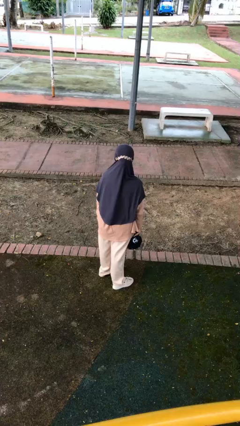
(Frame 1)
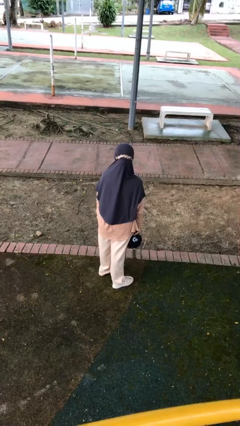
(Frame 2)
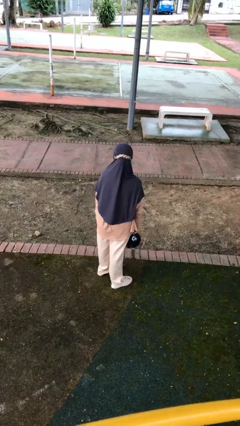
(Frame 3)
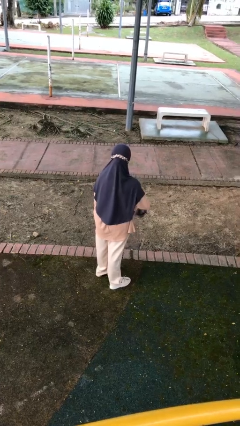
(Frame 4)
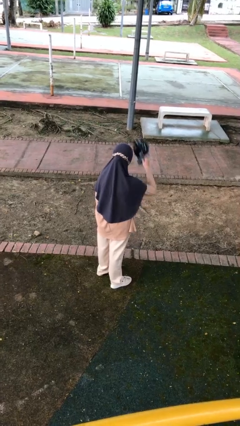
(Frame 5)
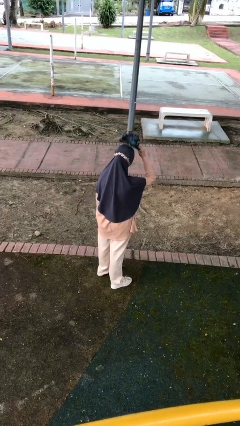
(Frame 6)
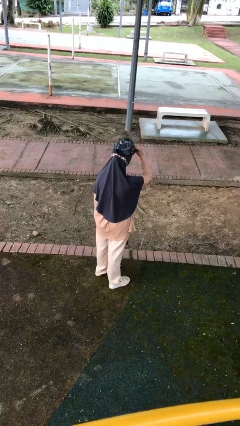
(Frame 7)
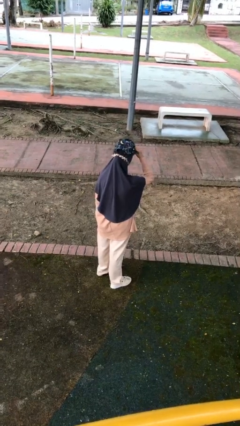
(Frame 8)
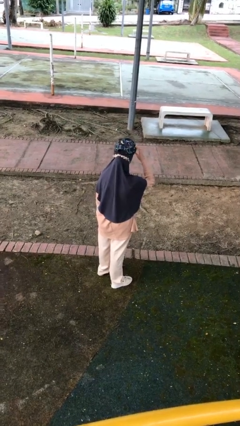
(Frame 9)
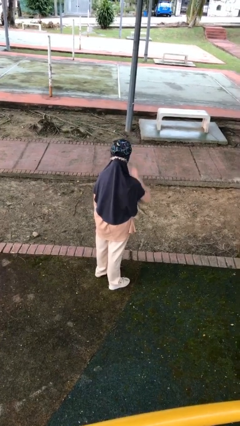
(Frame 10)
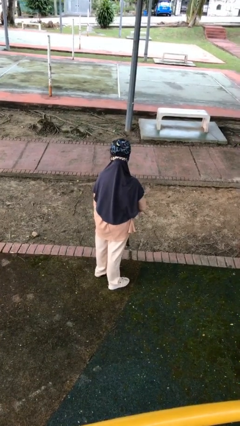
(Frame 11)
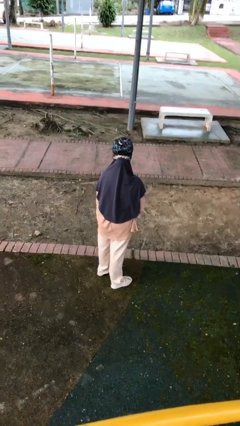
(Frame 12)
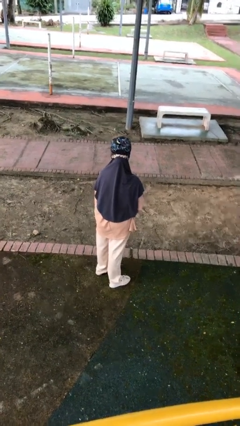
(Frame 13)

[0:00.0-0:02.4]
person puts on hat

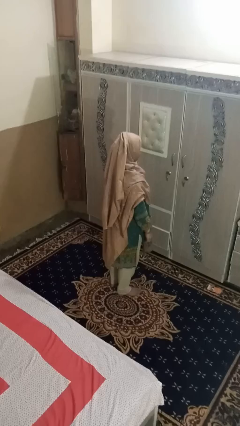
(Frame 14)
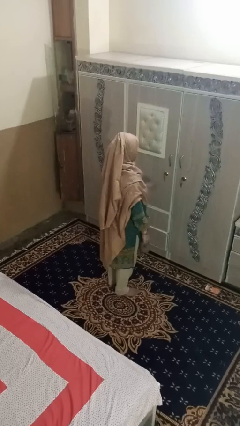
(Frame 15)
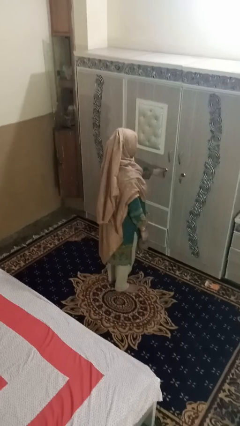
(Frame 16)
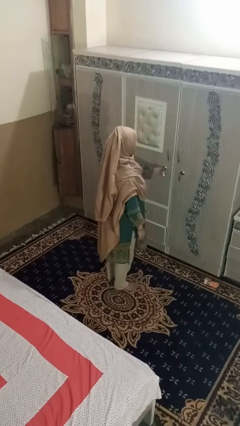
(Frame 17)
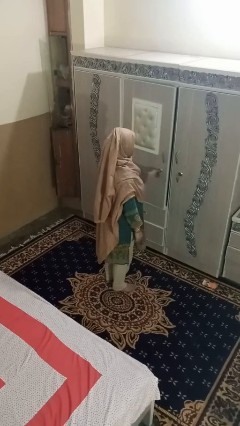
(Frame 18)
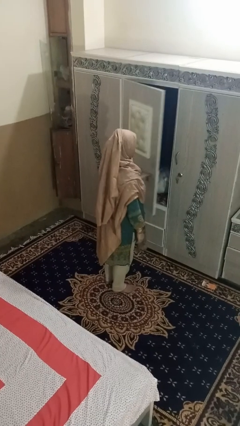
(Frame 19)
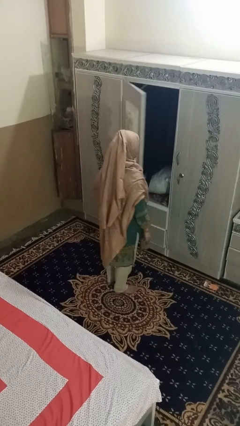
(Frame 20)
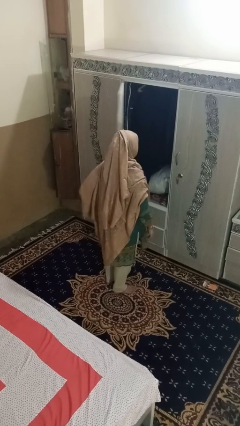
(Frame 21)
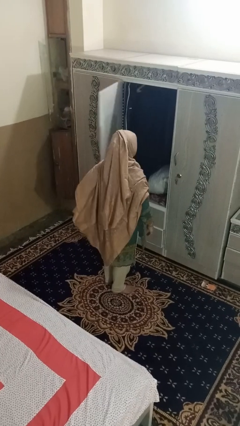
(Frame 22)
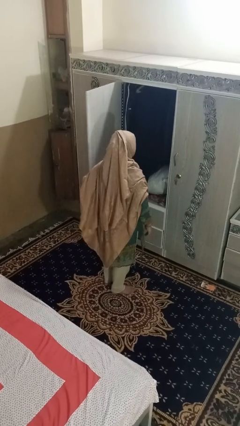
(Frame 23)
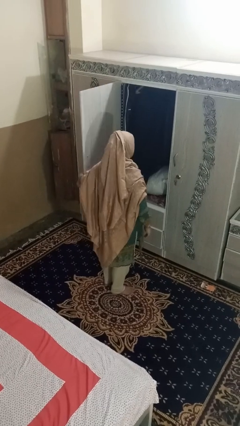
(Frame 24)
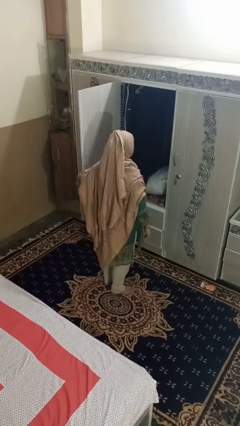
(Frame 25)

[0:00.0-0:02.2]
person opens dresser drawer

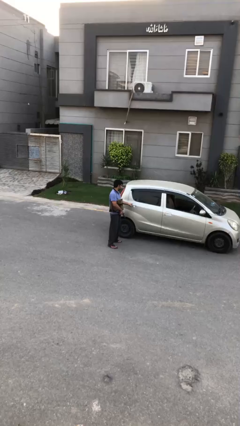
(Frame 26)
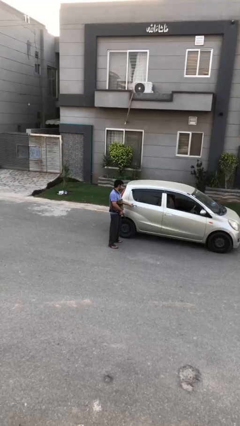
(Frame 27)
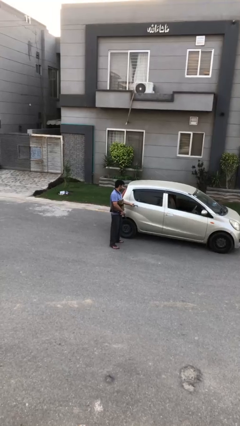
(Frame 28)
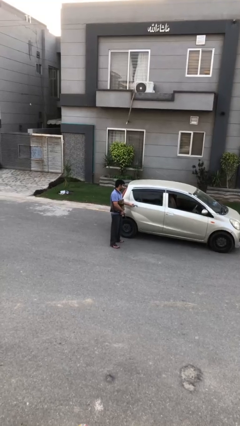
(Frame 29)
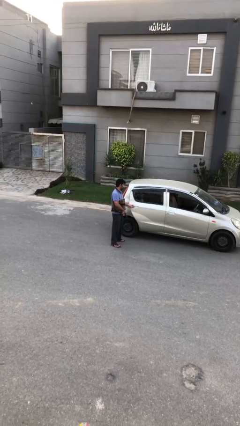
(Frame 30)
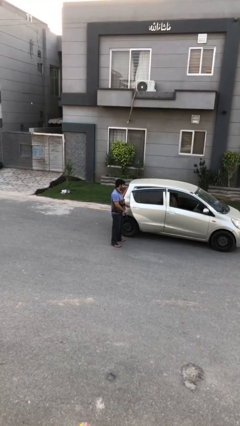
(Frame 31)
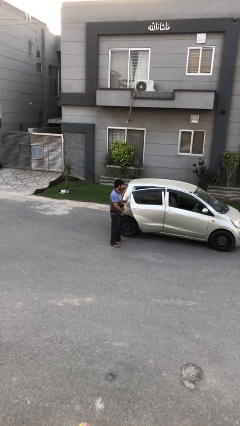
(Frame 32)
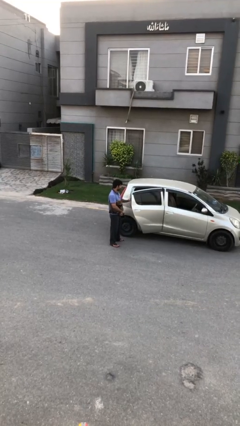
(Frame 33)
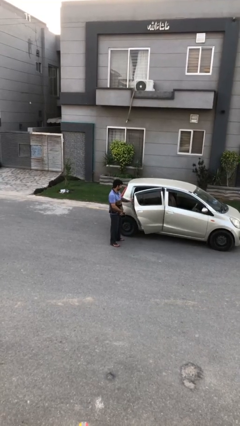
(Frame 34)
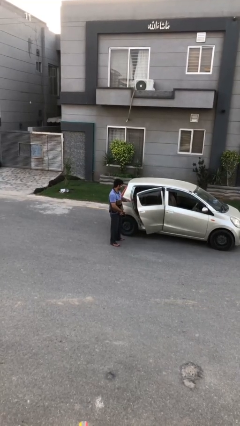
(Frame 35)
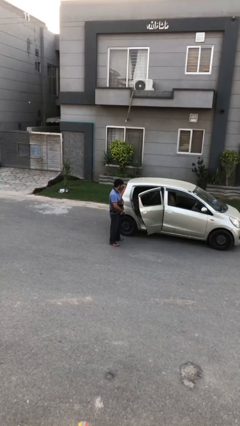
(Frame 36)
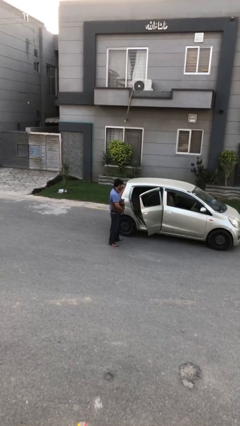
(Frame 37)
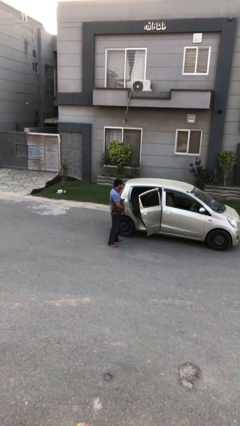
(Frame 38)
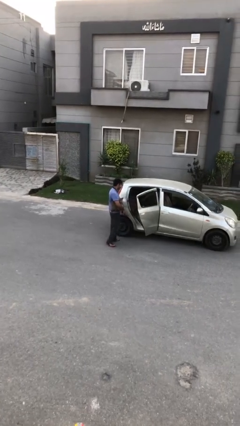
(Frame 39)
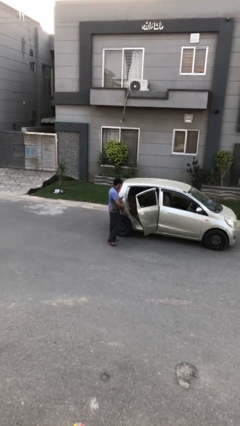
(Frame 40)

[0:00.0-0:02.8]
person opens car door

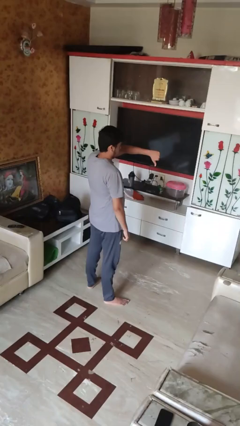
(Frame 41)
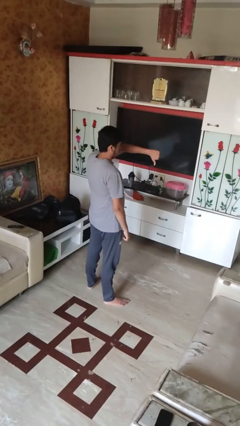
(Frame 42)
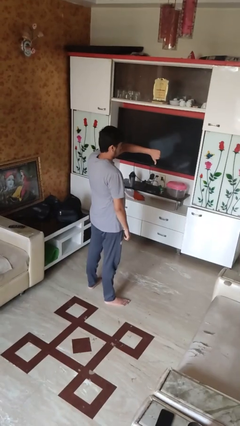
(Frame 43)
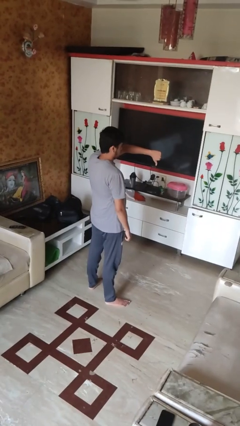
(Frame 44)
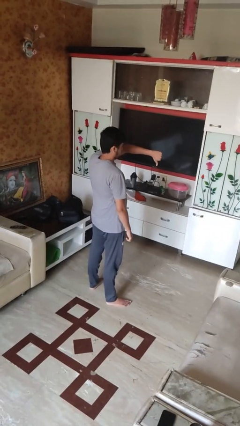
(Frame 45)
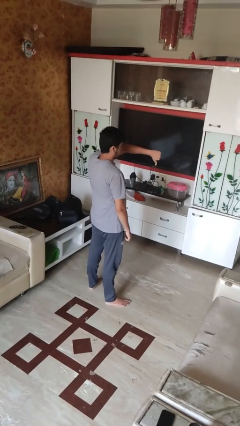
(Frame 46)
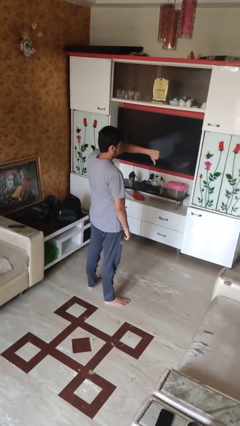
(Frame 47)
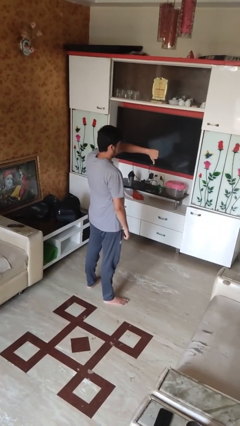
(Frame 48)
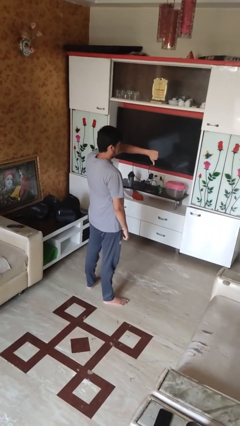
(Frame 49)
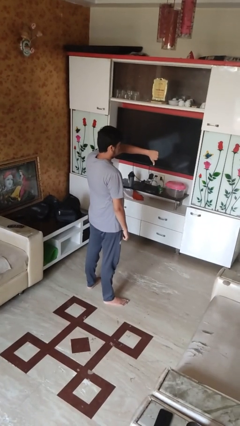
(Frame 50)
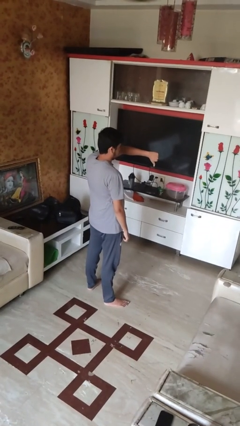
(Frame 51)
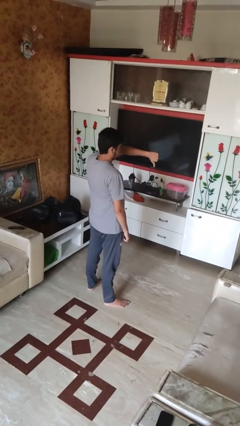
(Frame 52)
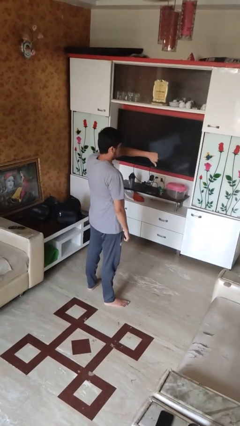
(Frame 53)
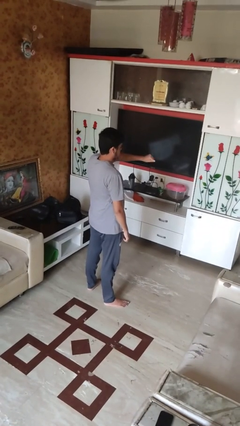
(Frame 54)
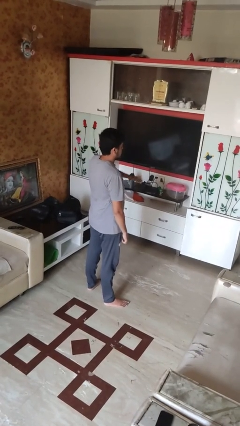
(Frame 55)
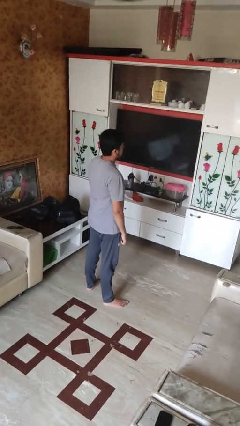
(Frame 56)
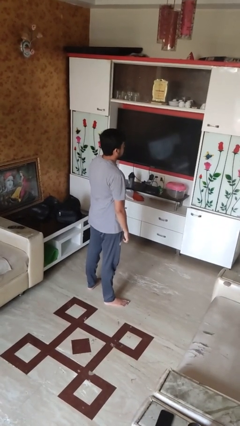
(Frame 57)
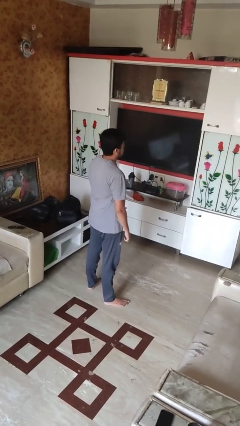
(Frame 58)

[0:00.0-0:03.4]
person gestures thumbs down

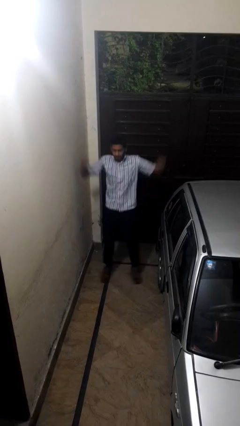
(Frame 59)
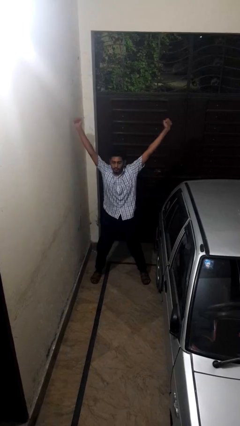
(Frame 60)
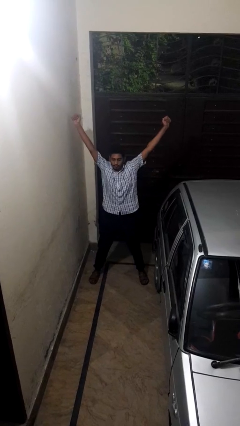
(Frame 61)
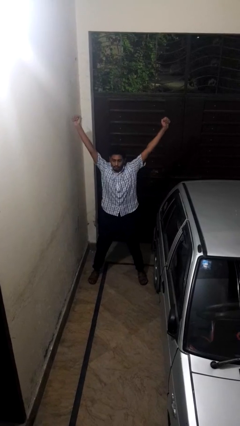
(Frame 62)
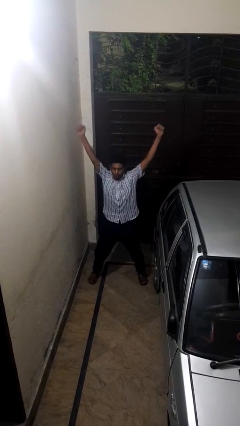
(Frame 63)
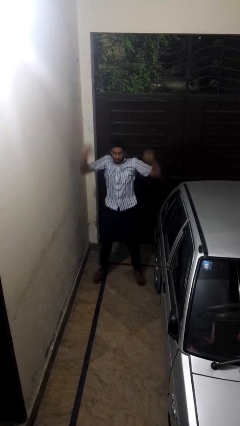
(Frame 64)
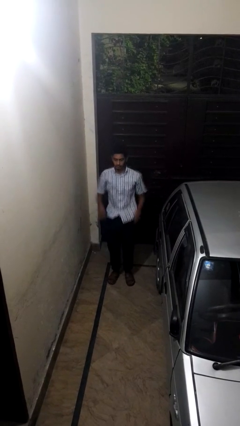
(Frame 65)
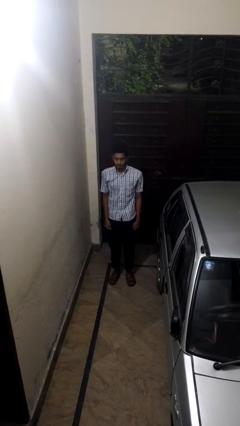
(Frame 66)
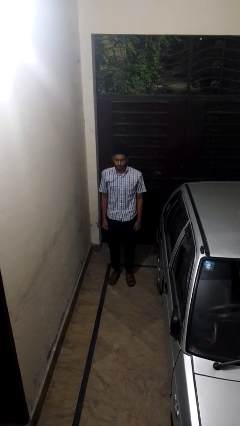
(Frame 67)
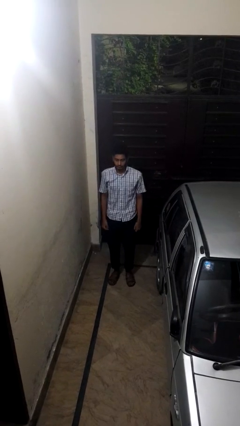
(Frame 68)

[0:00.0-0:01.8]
person exercises with jumping jacks

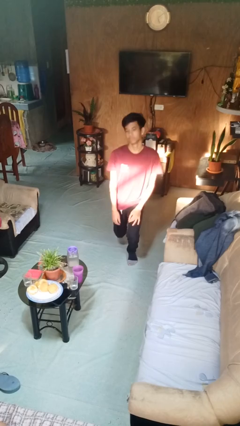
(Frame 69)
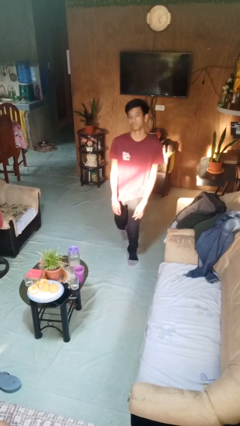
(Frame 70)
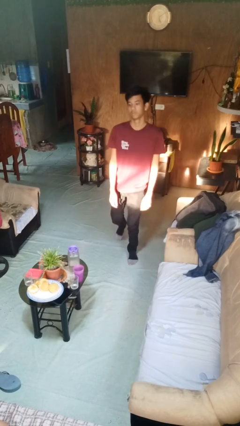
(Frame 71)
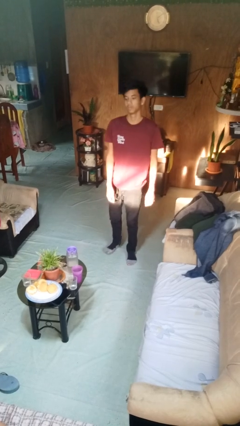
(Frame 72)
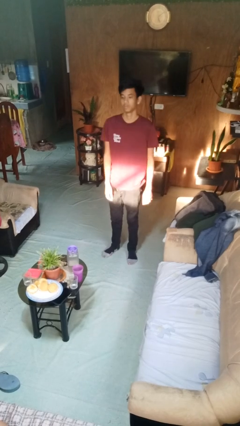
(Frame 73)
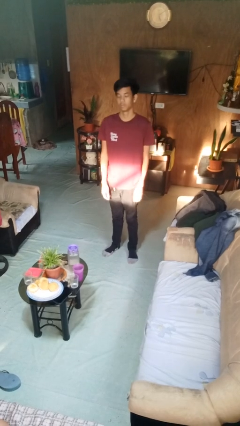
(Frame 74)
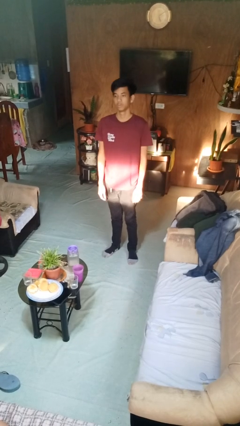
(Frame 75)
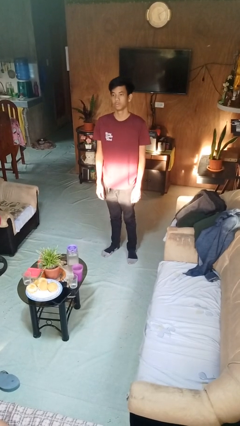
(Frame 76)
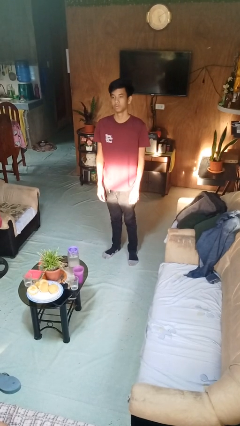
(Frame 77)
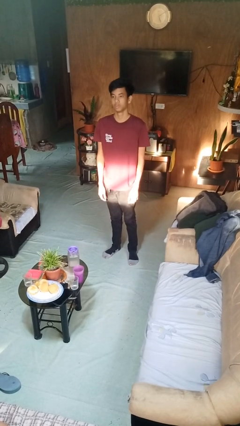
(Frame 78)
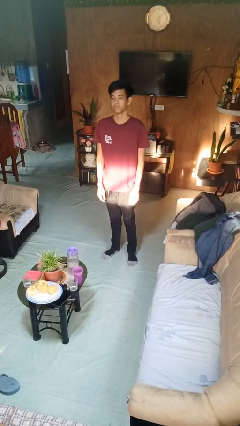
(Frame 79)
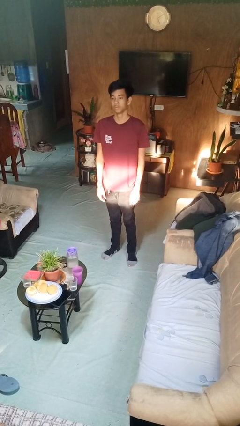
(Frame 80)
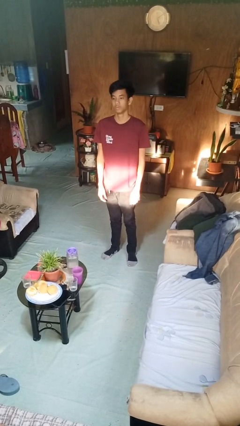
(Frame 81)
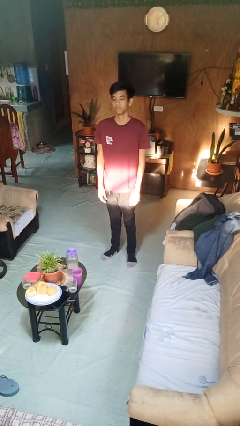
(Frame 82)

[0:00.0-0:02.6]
person stands up from floor

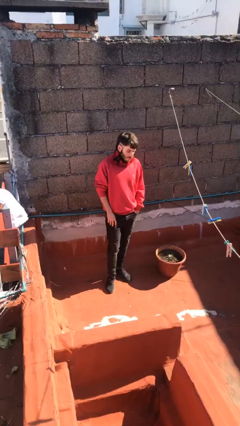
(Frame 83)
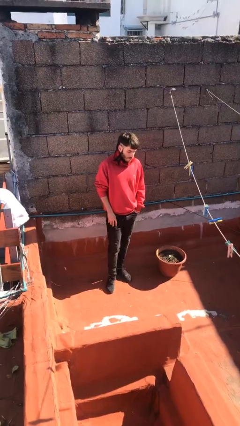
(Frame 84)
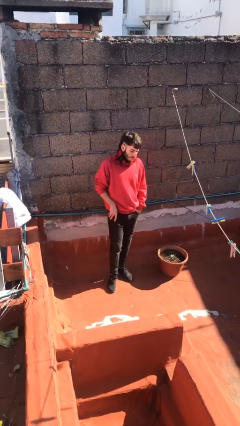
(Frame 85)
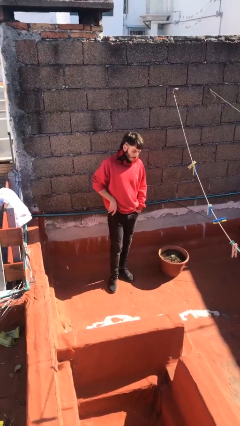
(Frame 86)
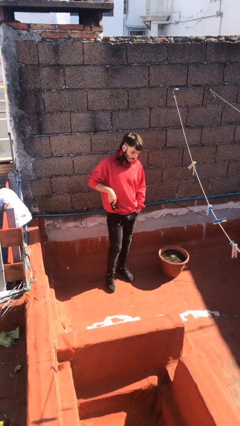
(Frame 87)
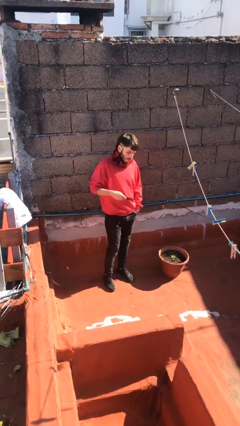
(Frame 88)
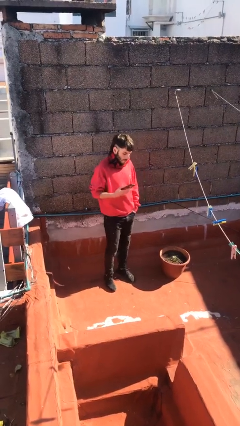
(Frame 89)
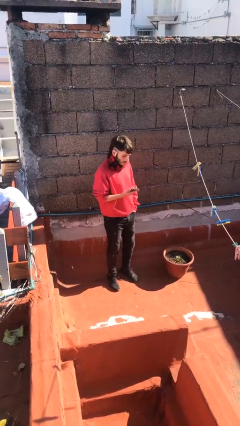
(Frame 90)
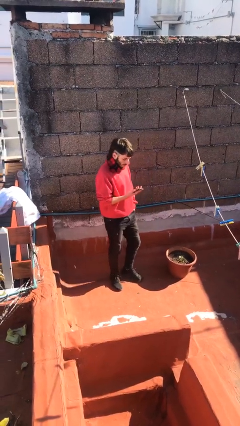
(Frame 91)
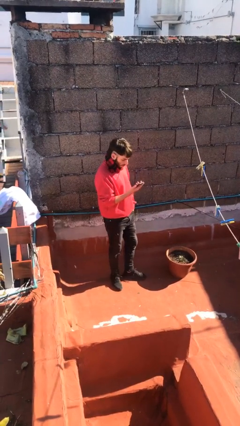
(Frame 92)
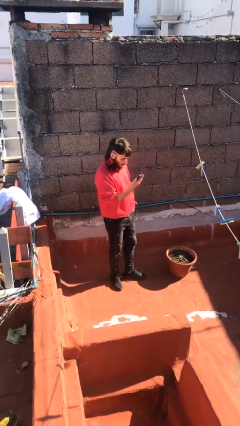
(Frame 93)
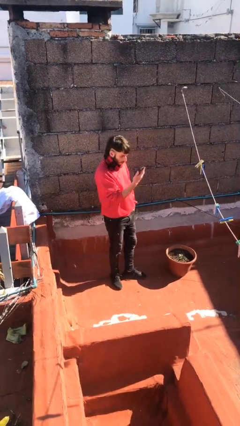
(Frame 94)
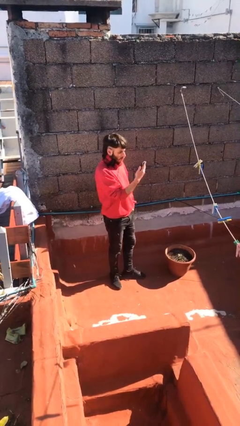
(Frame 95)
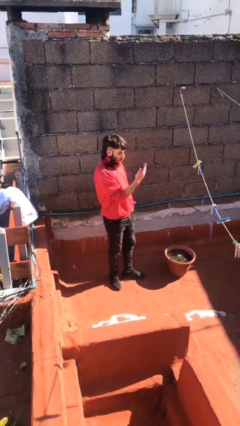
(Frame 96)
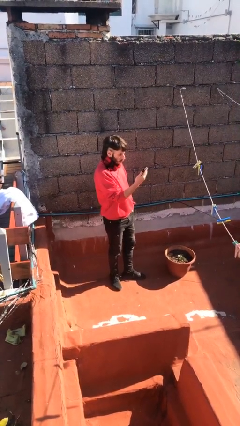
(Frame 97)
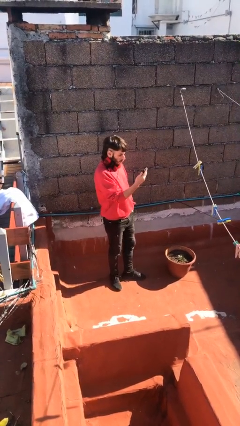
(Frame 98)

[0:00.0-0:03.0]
person takes phone from pocket
